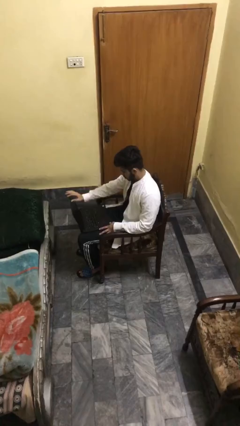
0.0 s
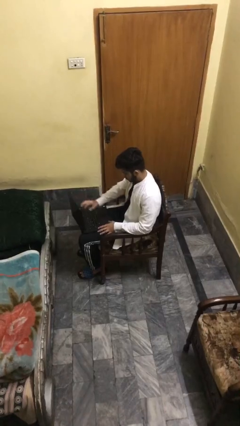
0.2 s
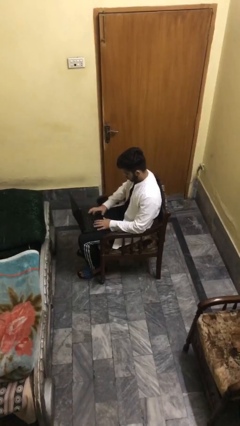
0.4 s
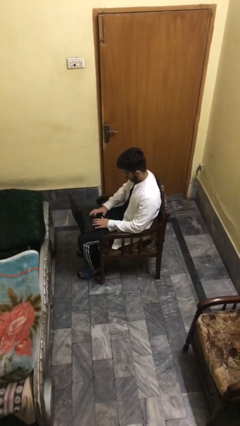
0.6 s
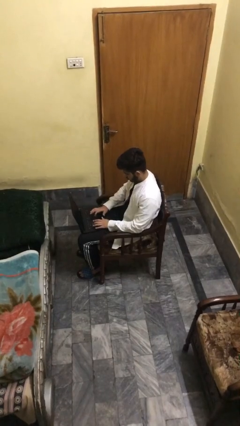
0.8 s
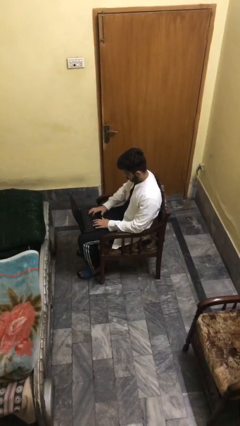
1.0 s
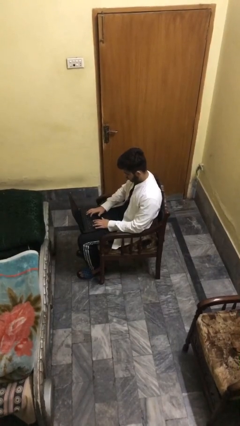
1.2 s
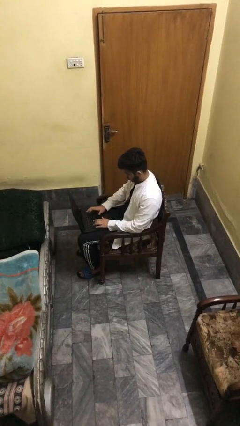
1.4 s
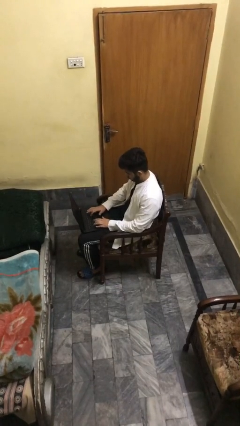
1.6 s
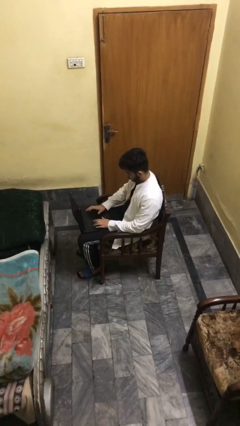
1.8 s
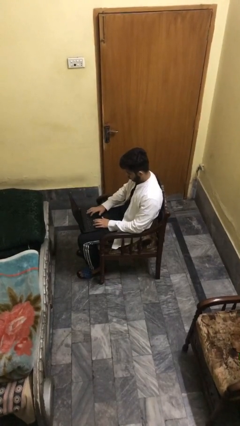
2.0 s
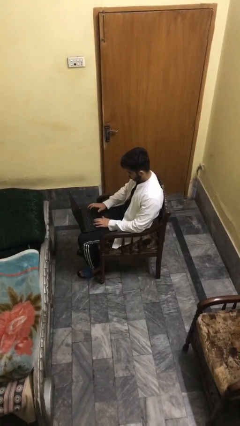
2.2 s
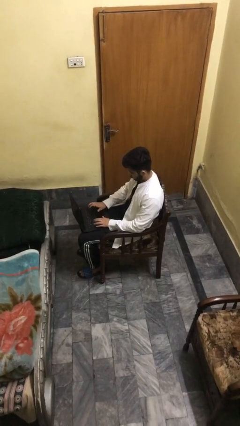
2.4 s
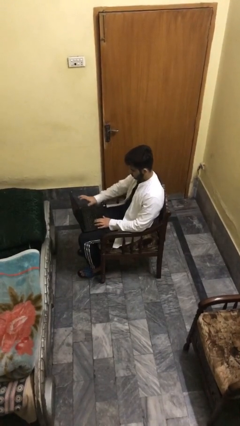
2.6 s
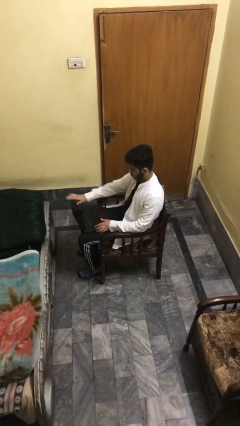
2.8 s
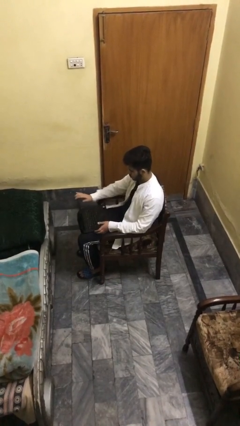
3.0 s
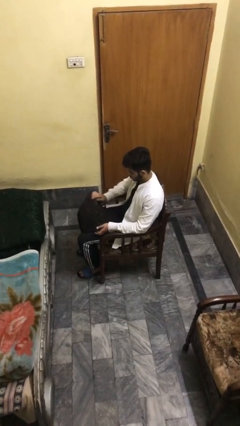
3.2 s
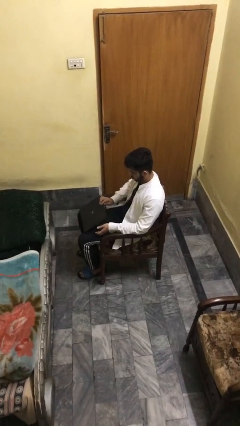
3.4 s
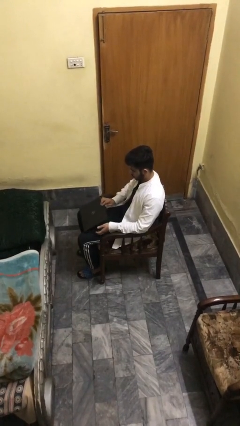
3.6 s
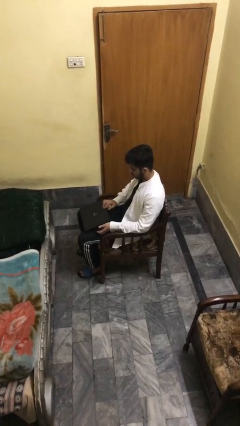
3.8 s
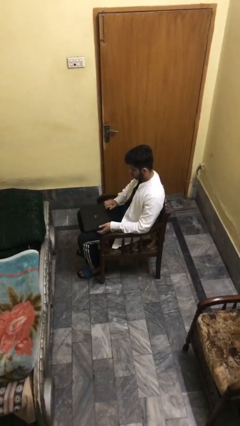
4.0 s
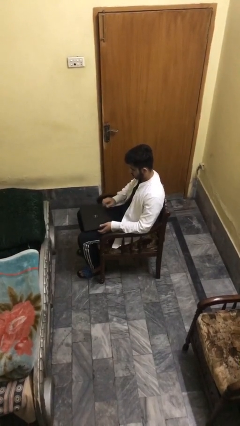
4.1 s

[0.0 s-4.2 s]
person interacts with laptop

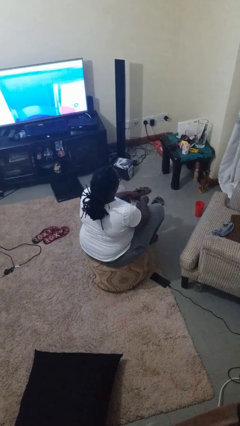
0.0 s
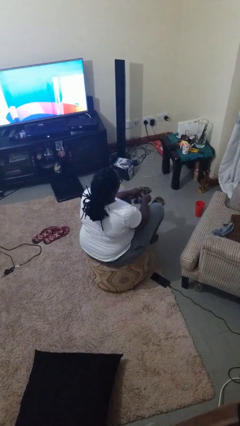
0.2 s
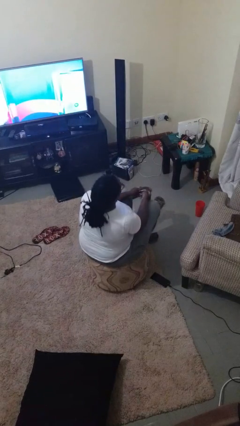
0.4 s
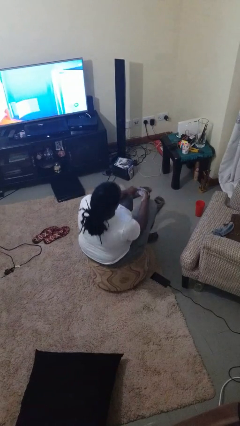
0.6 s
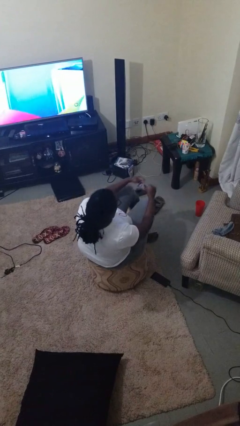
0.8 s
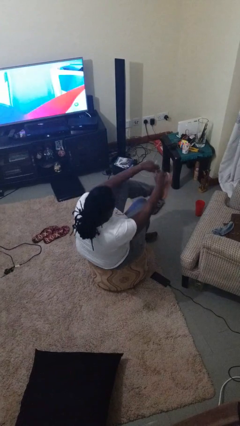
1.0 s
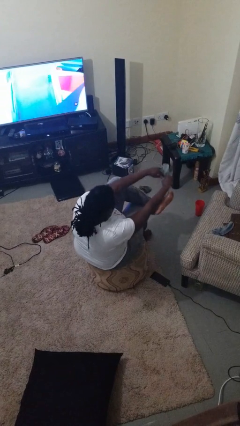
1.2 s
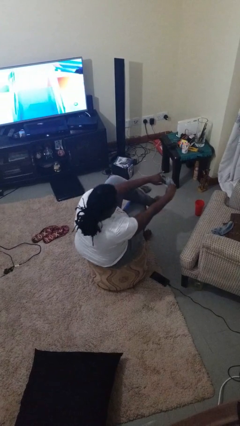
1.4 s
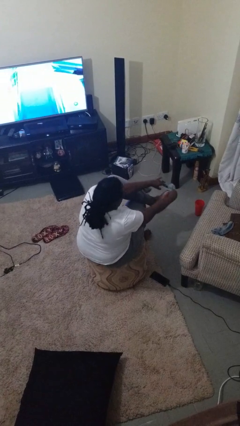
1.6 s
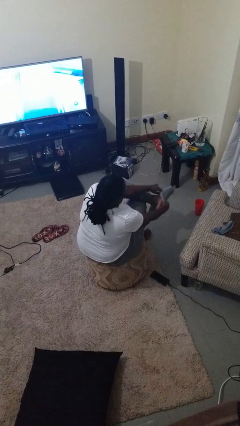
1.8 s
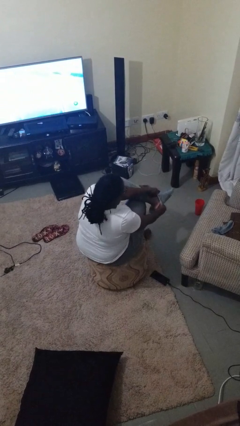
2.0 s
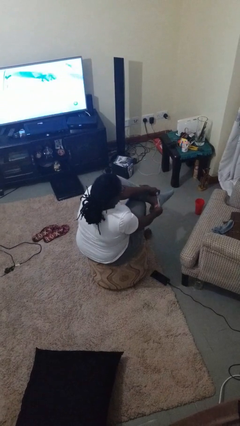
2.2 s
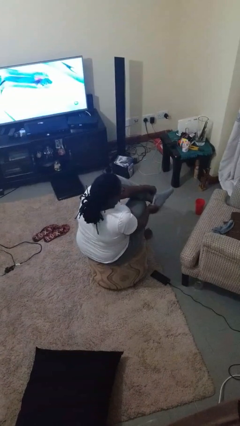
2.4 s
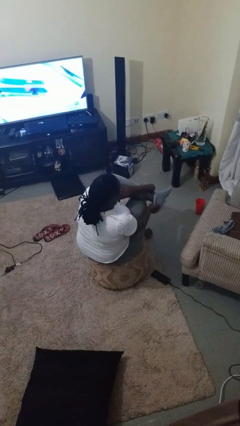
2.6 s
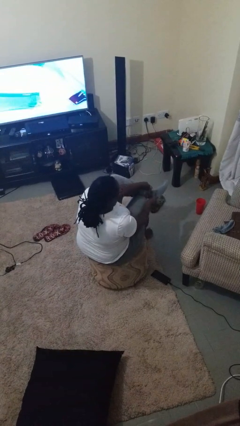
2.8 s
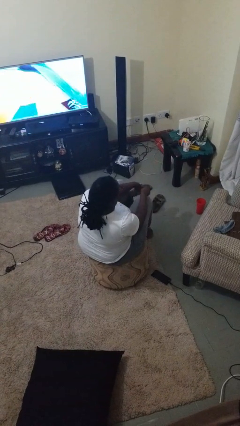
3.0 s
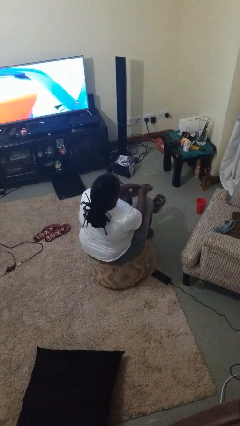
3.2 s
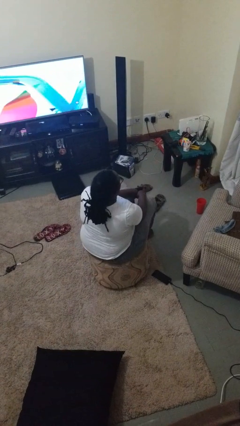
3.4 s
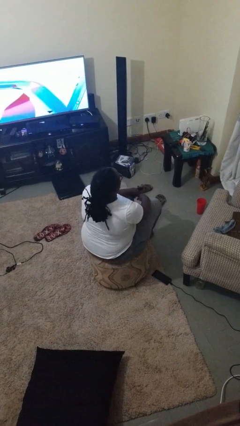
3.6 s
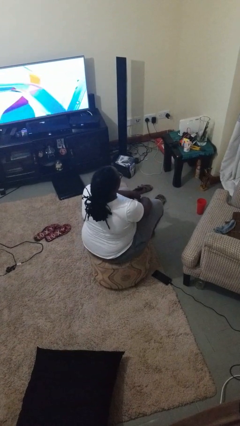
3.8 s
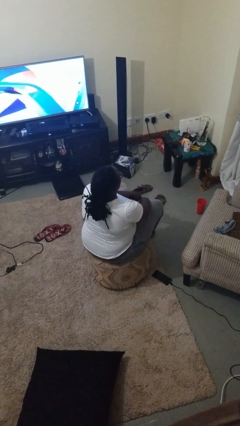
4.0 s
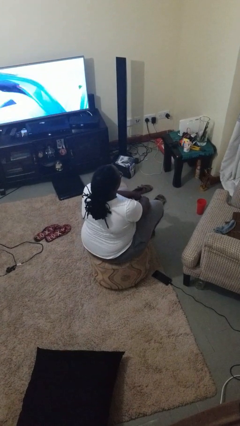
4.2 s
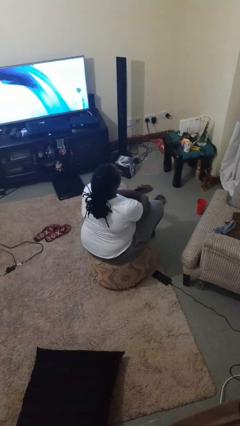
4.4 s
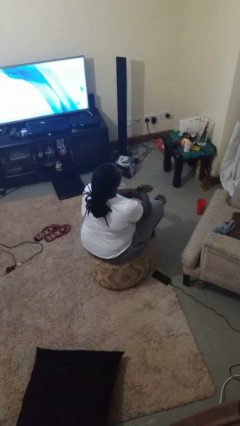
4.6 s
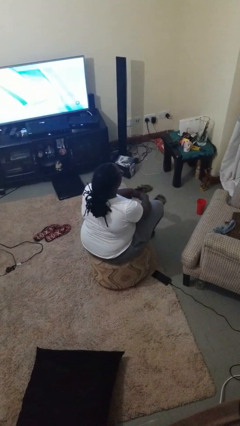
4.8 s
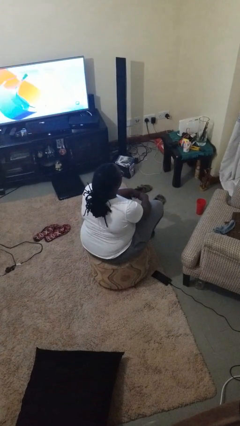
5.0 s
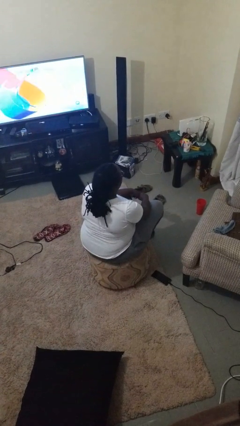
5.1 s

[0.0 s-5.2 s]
person puts on socks

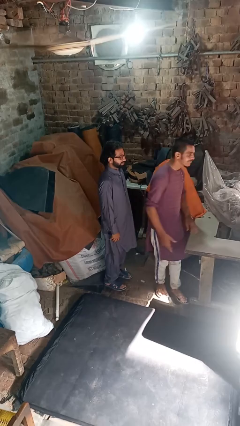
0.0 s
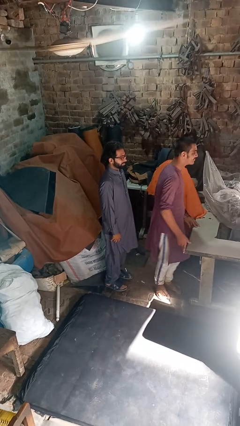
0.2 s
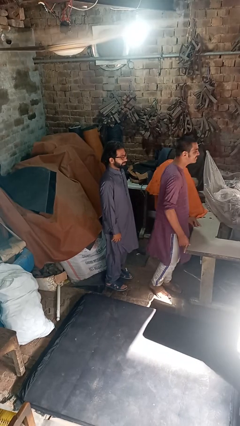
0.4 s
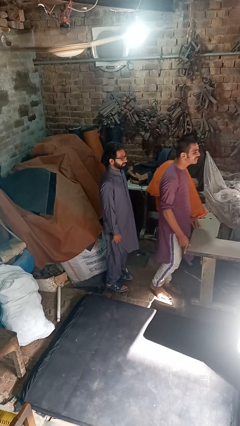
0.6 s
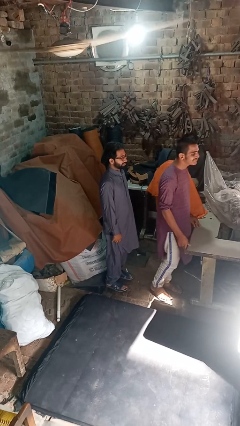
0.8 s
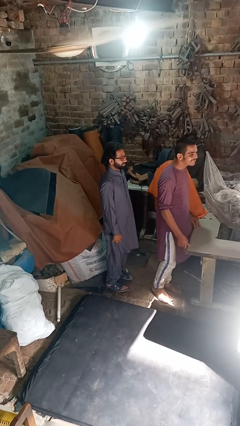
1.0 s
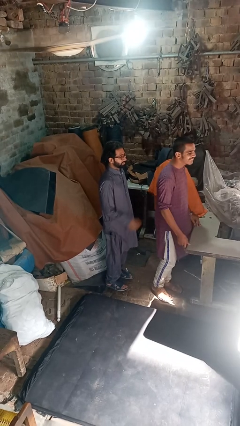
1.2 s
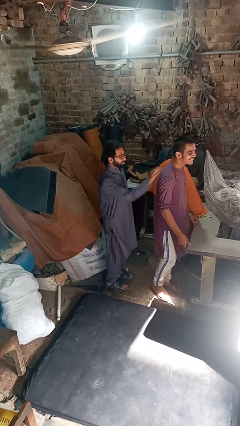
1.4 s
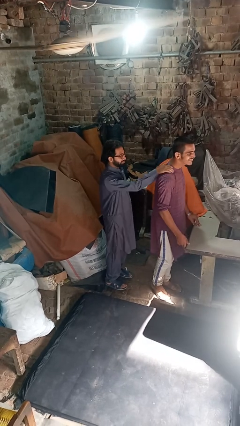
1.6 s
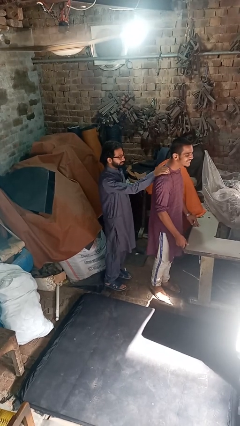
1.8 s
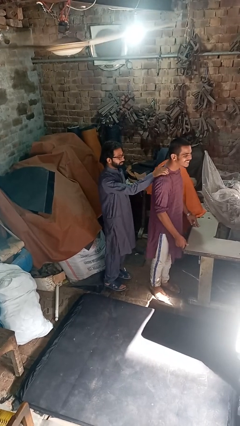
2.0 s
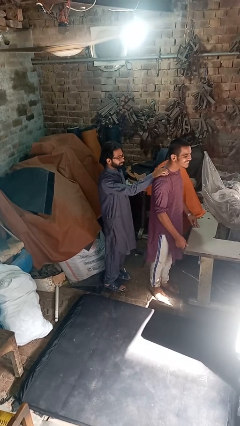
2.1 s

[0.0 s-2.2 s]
person grabs person by shoulder

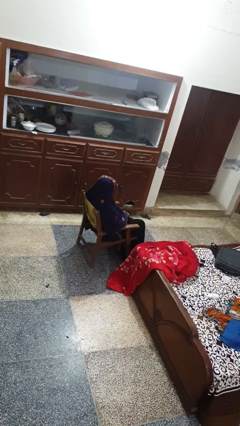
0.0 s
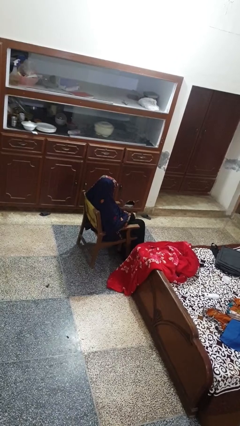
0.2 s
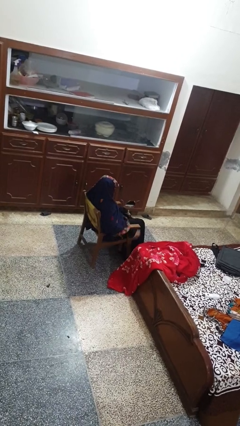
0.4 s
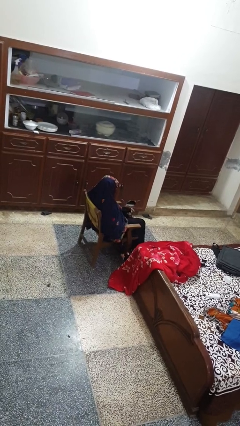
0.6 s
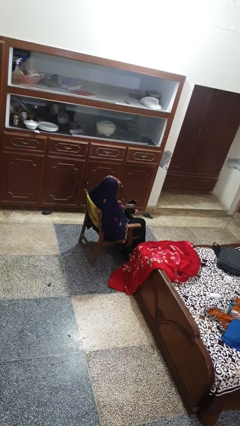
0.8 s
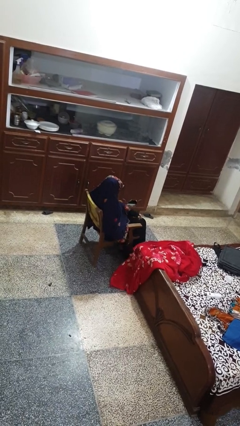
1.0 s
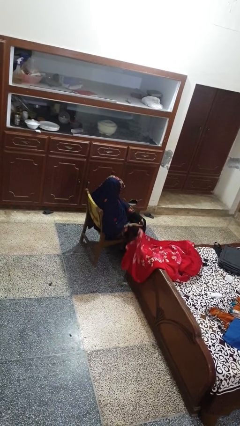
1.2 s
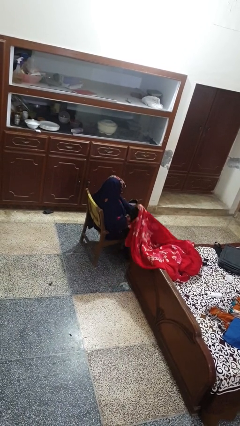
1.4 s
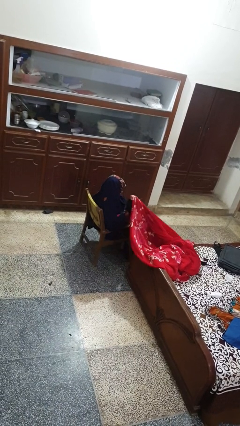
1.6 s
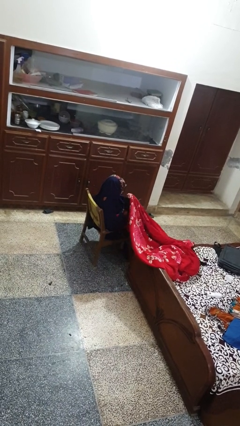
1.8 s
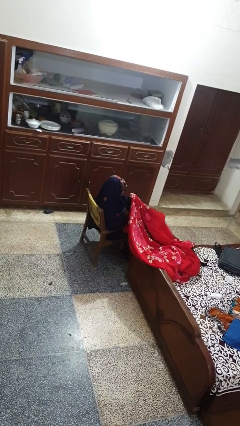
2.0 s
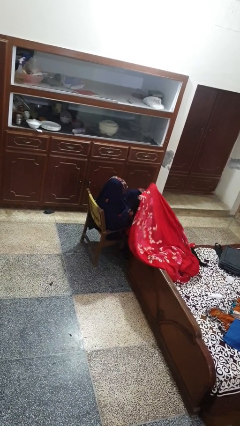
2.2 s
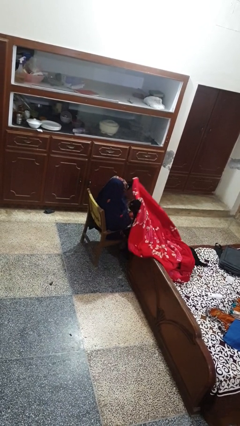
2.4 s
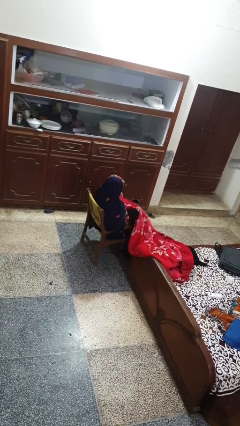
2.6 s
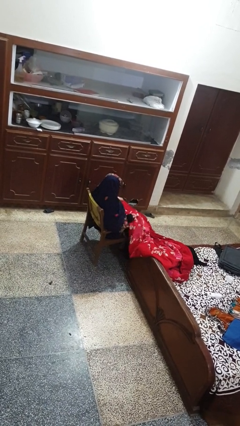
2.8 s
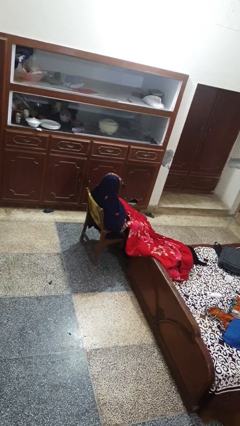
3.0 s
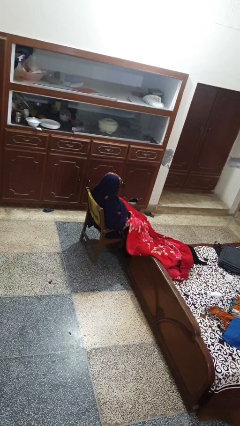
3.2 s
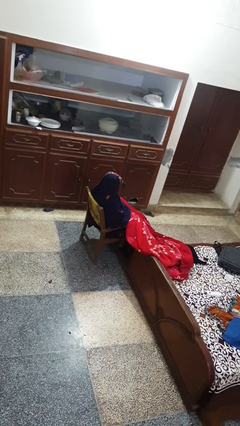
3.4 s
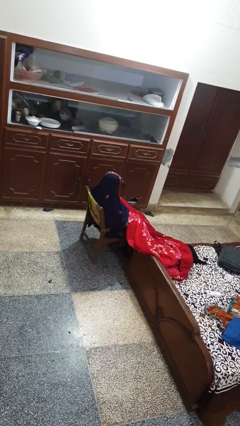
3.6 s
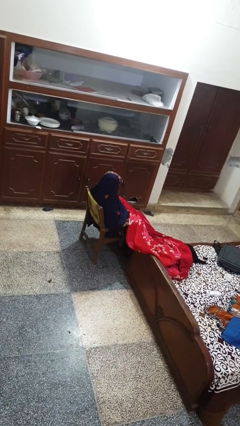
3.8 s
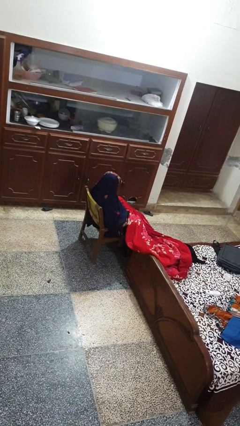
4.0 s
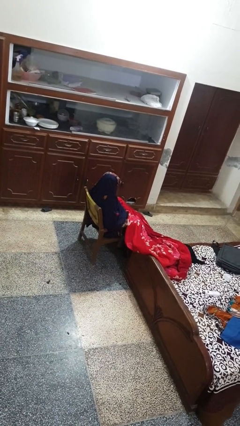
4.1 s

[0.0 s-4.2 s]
person covers with blanket

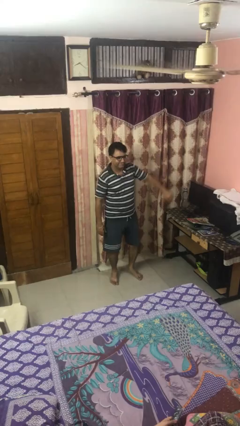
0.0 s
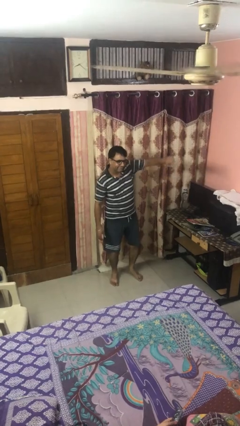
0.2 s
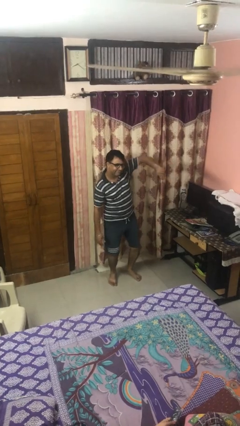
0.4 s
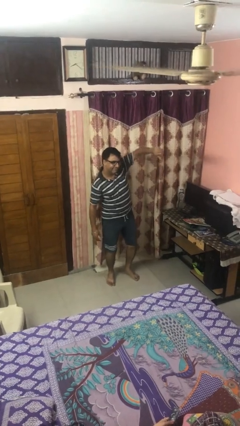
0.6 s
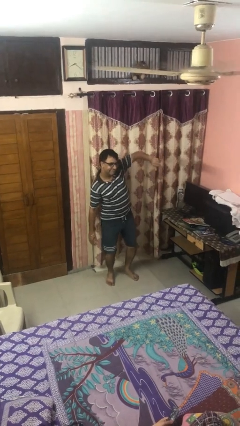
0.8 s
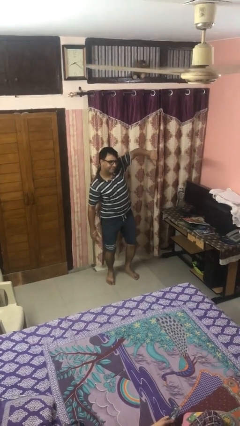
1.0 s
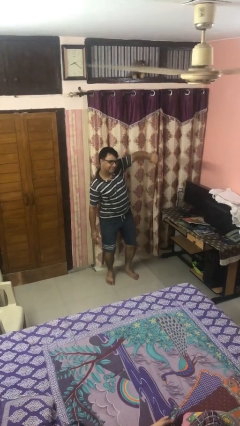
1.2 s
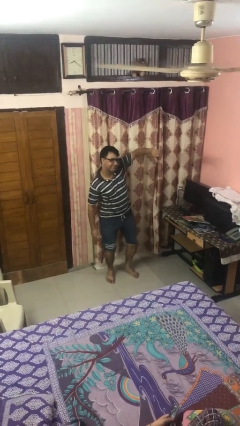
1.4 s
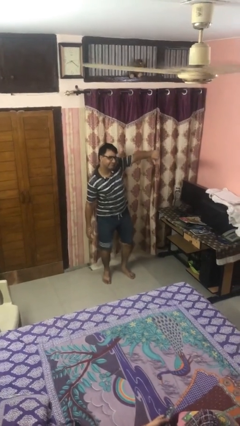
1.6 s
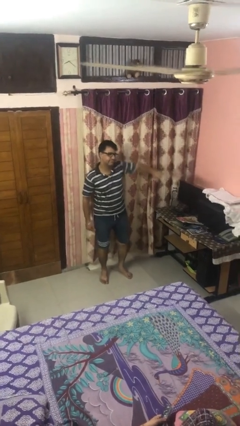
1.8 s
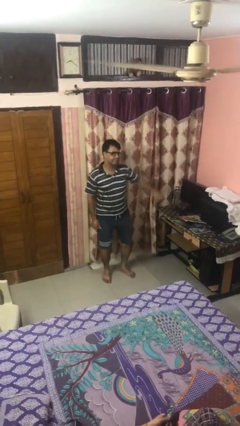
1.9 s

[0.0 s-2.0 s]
person gestures thumbs down
